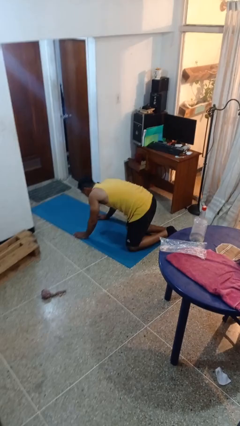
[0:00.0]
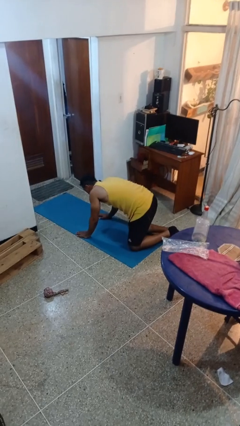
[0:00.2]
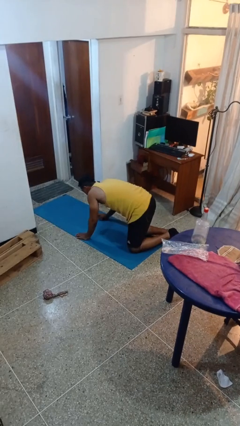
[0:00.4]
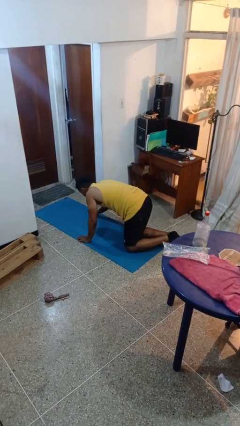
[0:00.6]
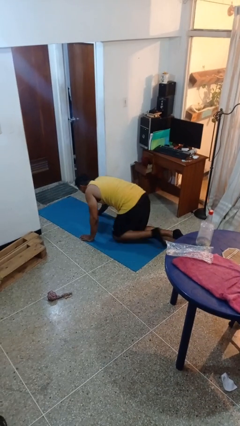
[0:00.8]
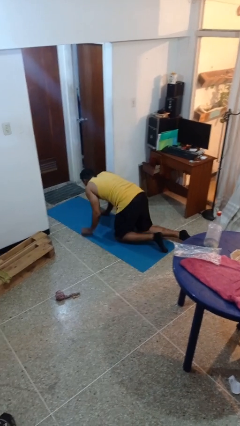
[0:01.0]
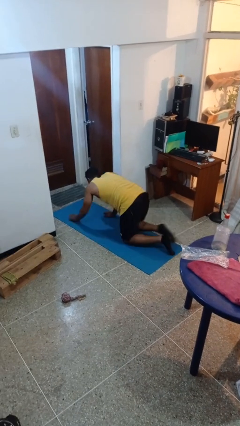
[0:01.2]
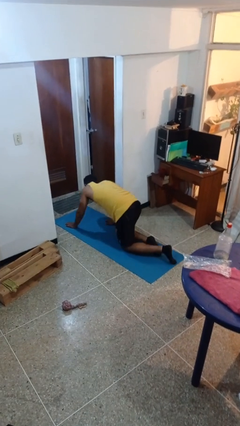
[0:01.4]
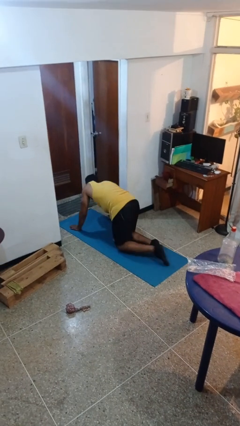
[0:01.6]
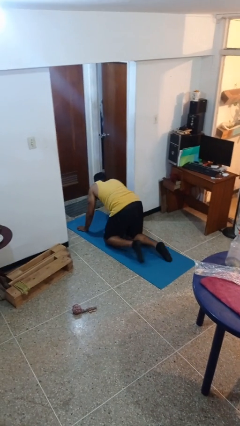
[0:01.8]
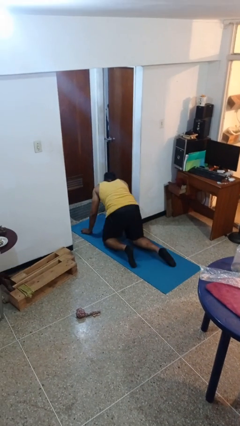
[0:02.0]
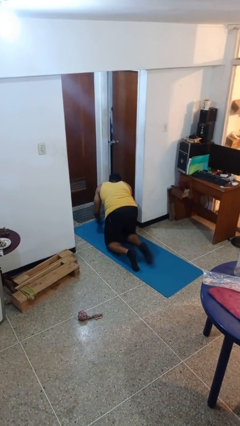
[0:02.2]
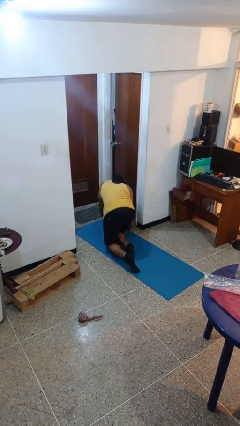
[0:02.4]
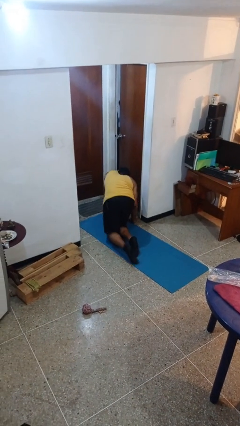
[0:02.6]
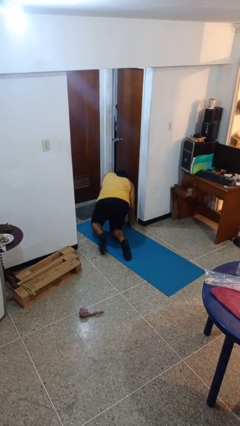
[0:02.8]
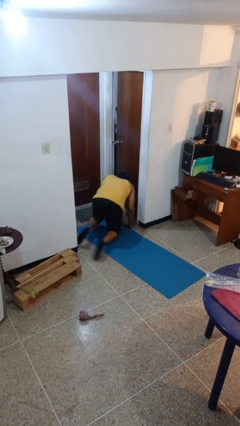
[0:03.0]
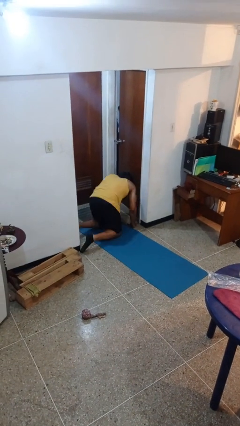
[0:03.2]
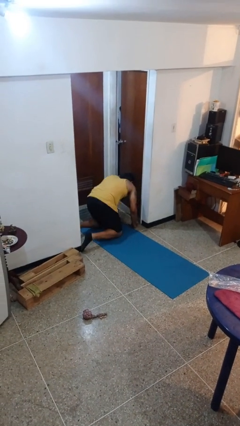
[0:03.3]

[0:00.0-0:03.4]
person crawls

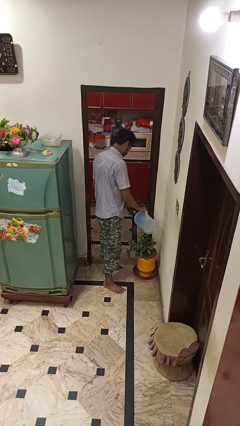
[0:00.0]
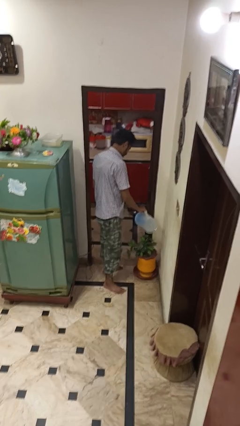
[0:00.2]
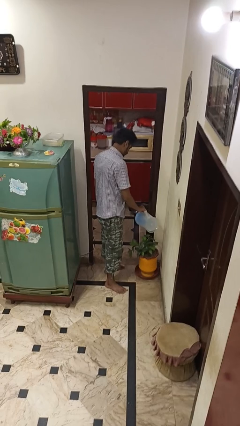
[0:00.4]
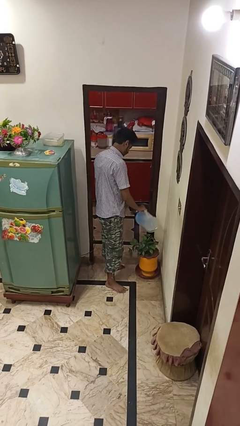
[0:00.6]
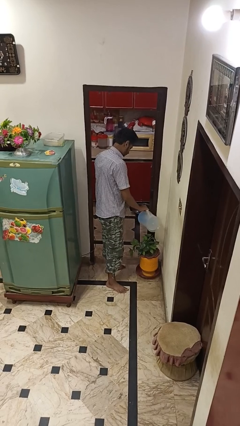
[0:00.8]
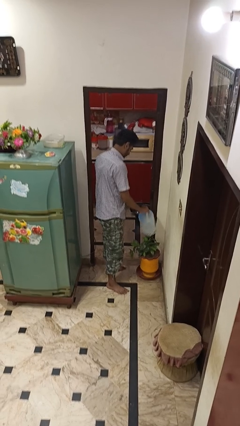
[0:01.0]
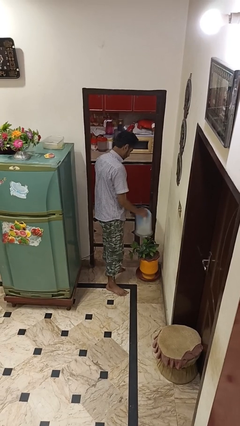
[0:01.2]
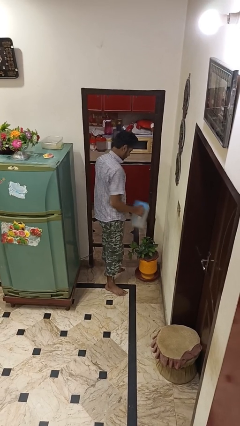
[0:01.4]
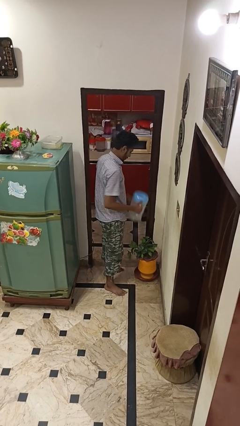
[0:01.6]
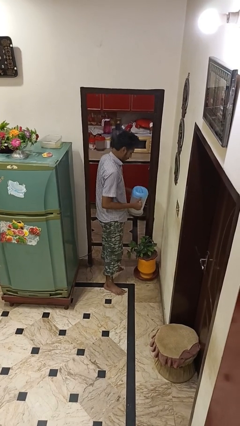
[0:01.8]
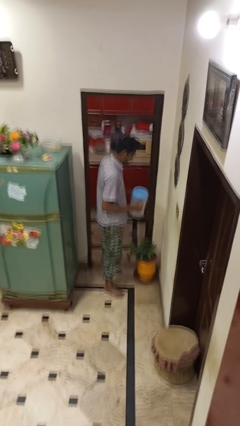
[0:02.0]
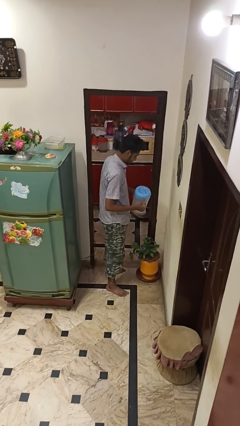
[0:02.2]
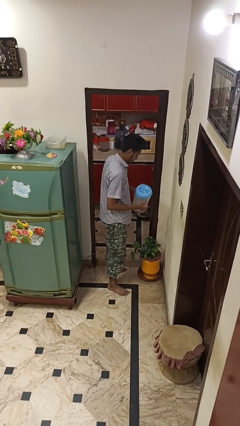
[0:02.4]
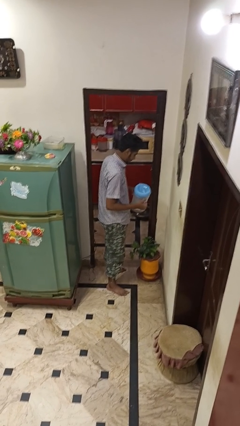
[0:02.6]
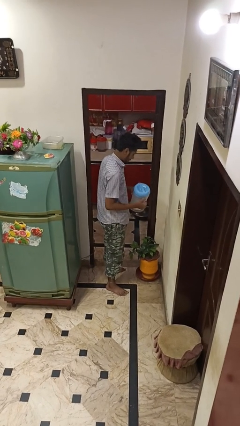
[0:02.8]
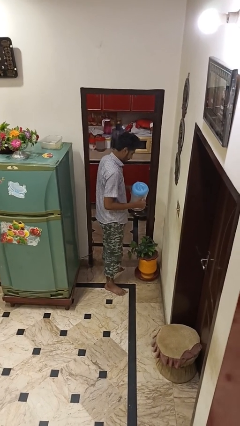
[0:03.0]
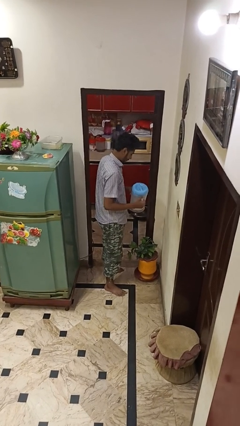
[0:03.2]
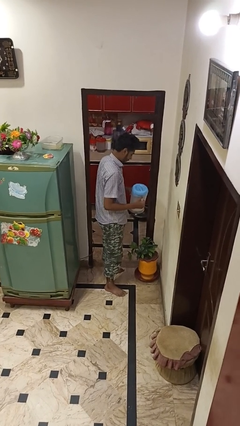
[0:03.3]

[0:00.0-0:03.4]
person waters houseplant

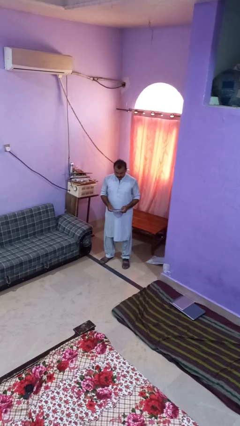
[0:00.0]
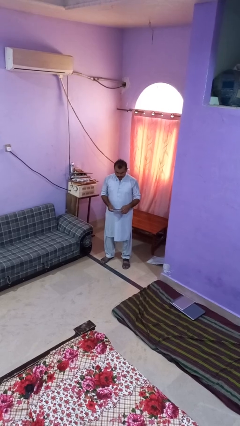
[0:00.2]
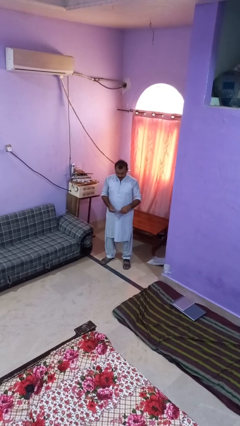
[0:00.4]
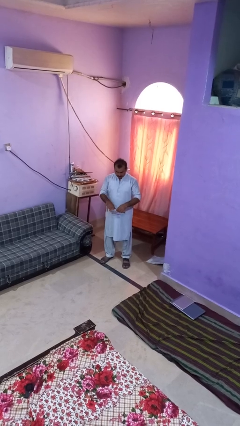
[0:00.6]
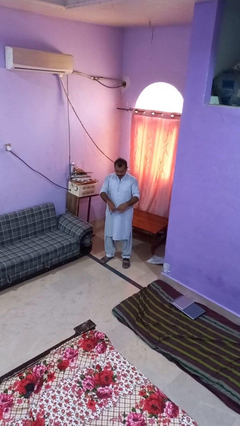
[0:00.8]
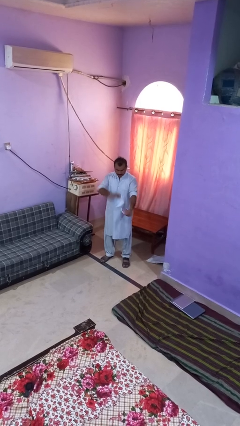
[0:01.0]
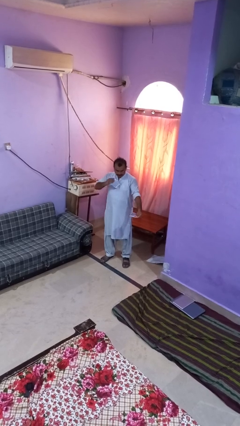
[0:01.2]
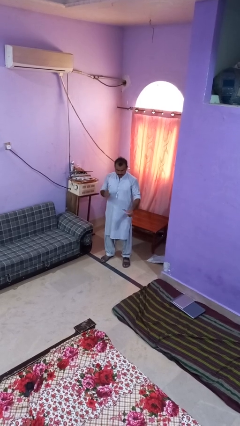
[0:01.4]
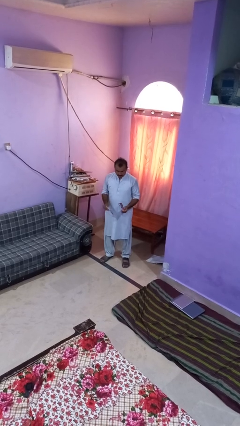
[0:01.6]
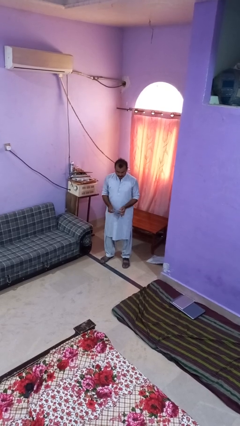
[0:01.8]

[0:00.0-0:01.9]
person tears paper

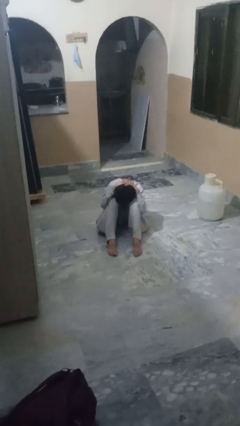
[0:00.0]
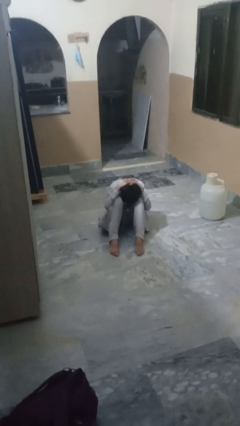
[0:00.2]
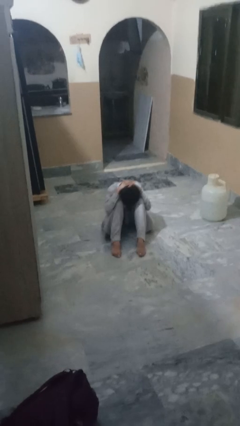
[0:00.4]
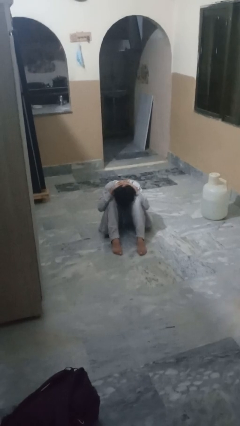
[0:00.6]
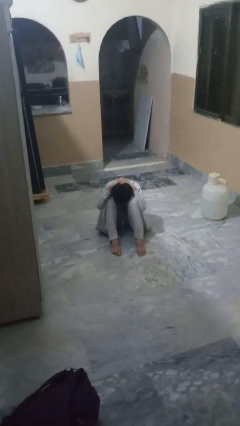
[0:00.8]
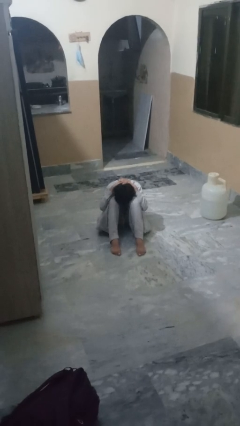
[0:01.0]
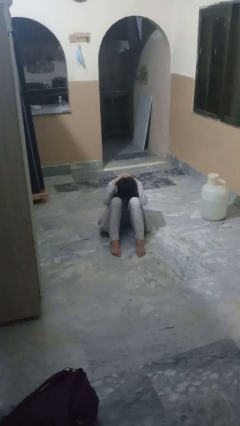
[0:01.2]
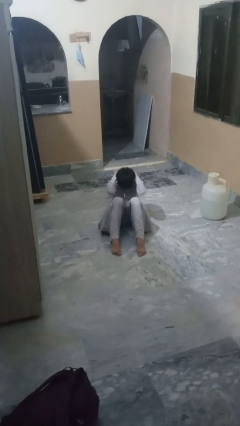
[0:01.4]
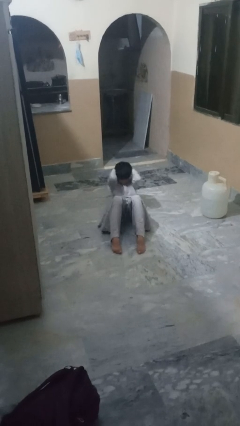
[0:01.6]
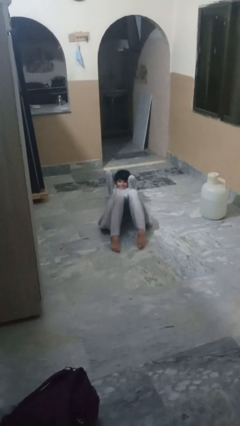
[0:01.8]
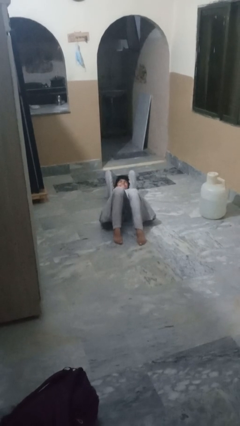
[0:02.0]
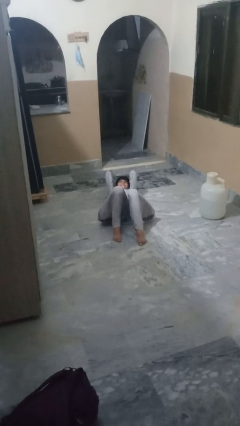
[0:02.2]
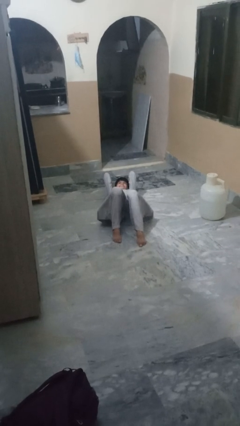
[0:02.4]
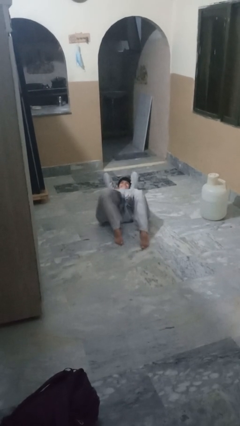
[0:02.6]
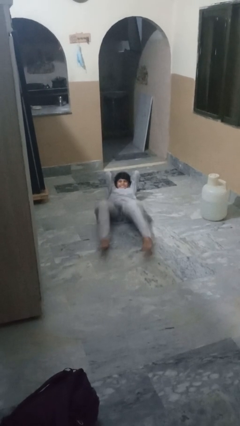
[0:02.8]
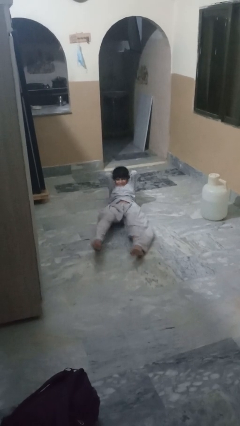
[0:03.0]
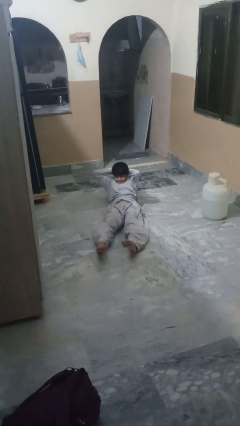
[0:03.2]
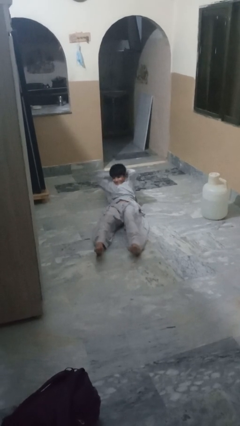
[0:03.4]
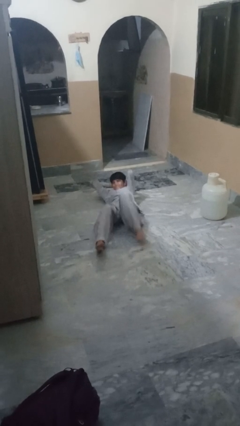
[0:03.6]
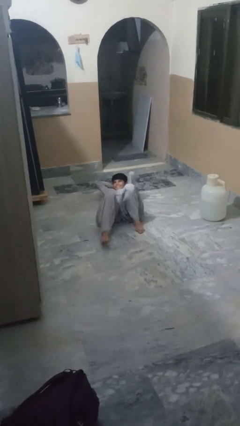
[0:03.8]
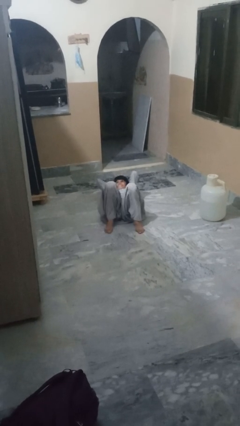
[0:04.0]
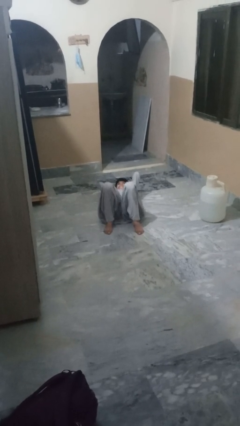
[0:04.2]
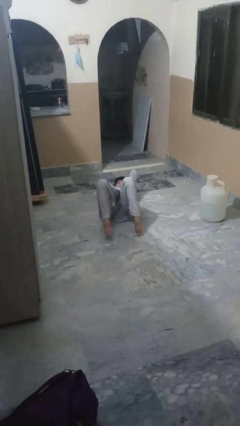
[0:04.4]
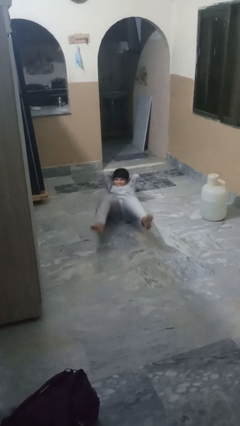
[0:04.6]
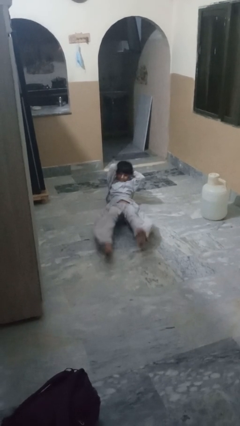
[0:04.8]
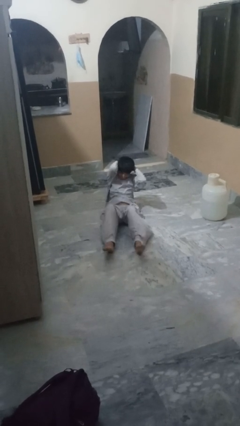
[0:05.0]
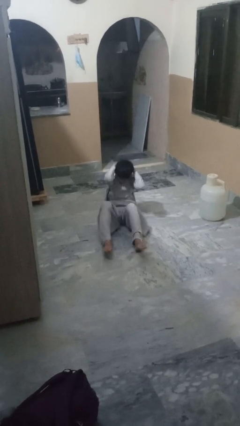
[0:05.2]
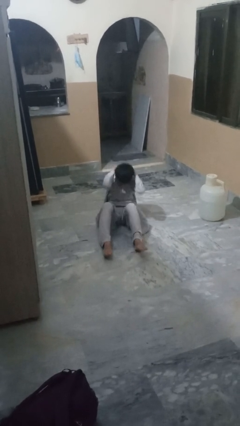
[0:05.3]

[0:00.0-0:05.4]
person exercises with situp

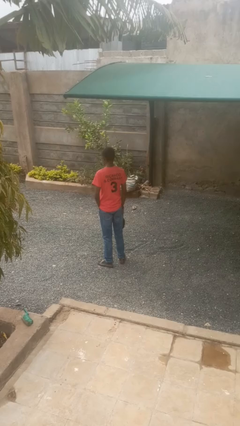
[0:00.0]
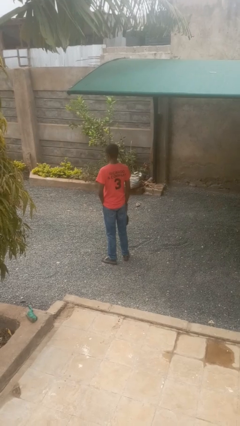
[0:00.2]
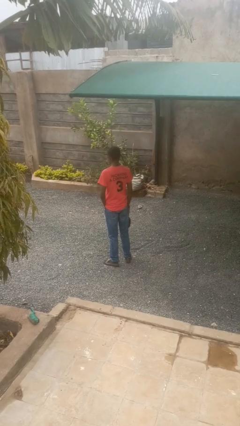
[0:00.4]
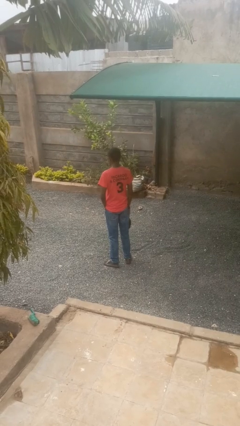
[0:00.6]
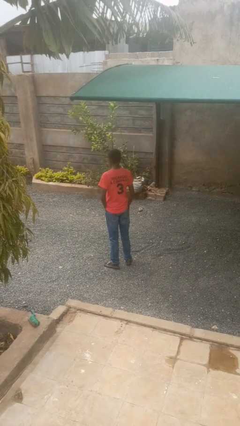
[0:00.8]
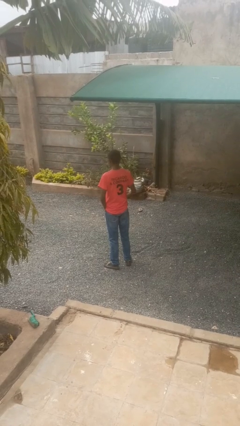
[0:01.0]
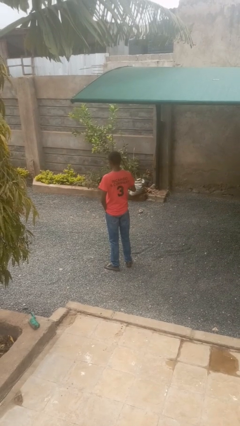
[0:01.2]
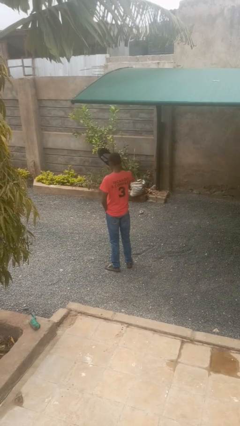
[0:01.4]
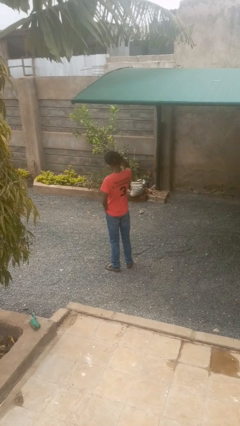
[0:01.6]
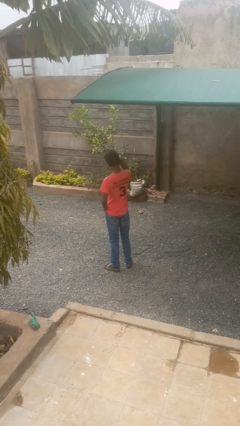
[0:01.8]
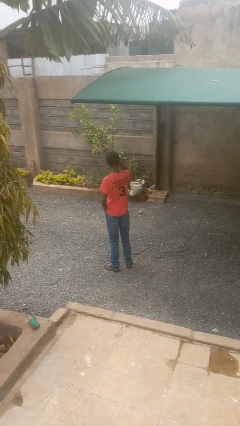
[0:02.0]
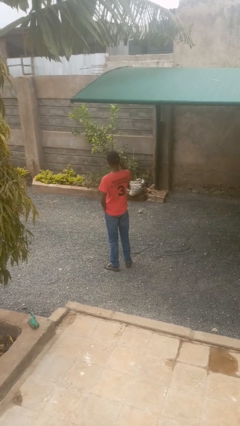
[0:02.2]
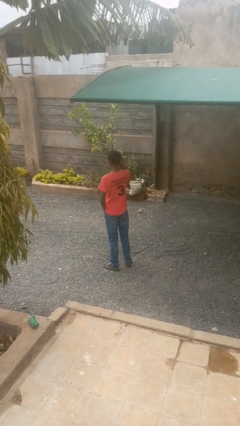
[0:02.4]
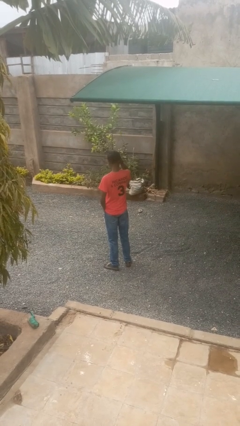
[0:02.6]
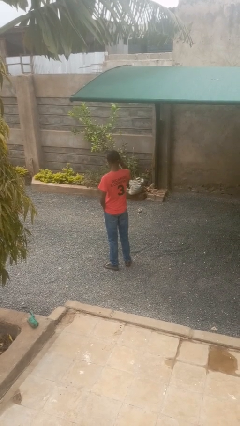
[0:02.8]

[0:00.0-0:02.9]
person puts on hat

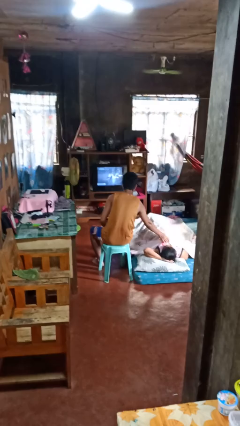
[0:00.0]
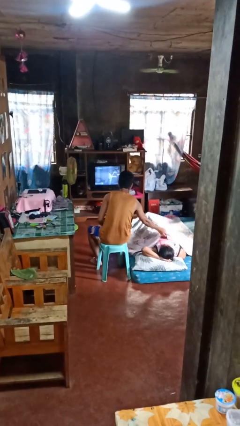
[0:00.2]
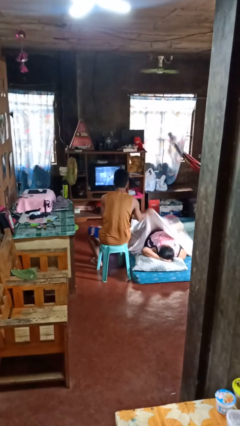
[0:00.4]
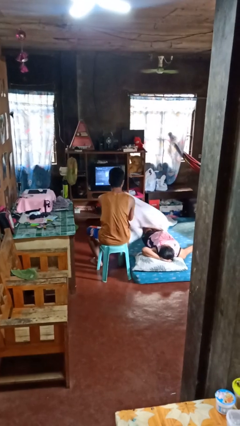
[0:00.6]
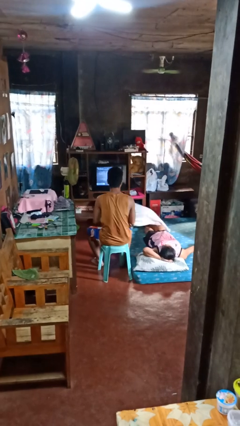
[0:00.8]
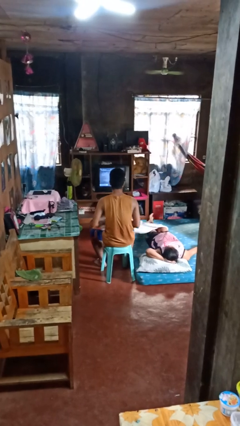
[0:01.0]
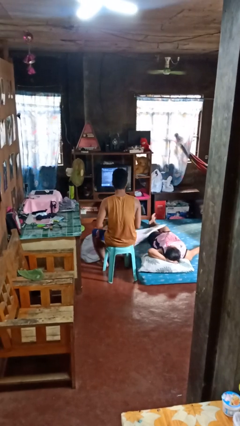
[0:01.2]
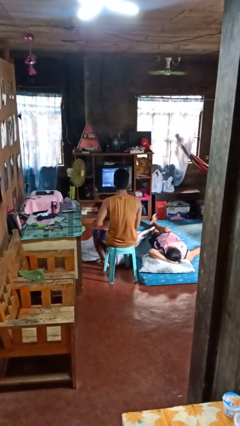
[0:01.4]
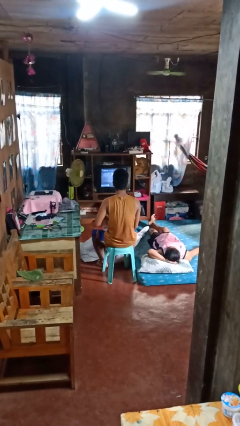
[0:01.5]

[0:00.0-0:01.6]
person uncovers friend with blanket
